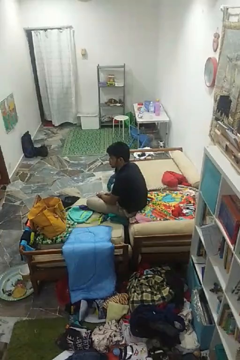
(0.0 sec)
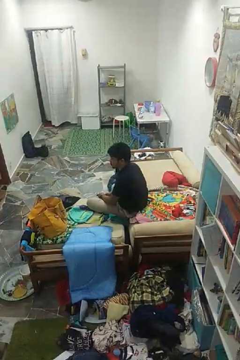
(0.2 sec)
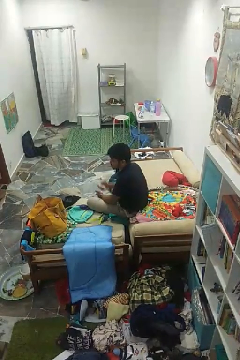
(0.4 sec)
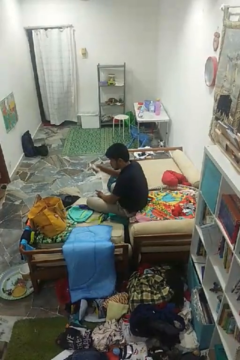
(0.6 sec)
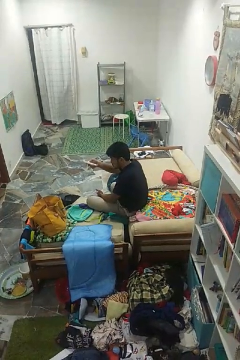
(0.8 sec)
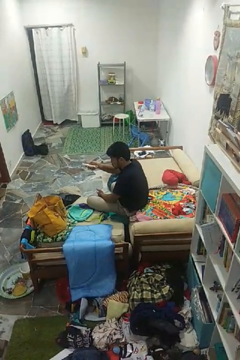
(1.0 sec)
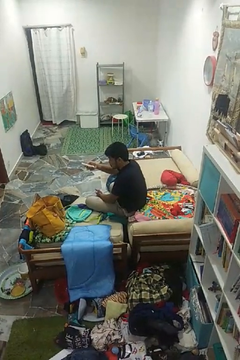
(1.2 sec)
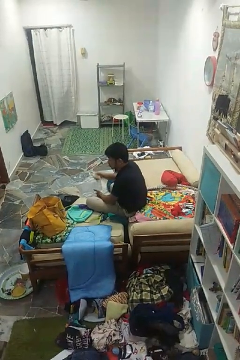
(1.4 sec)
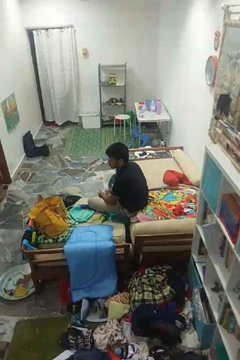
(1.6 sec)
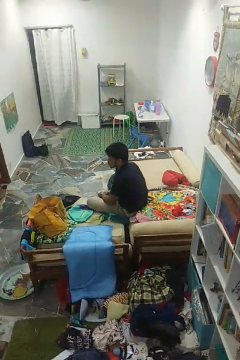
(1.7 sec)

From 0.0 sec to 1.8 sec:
person uses television remote

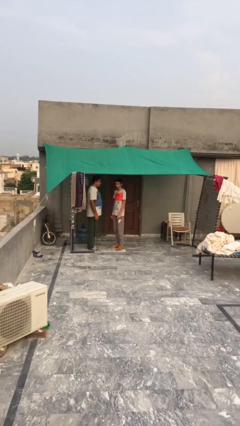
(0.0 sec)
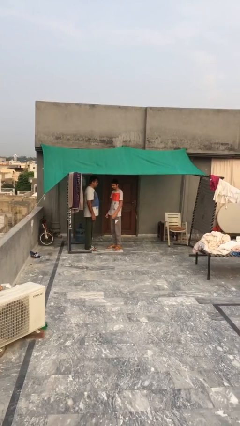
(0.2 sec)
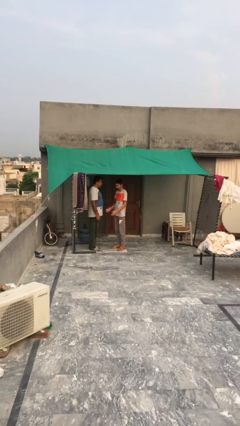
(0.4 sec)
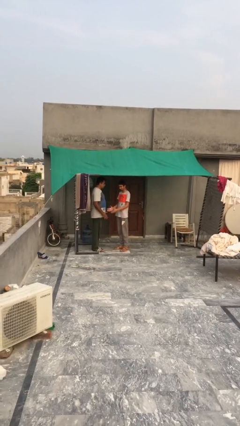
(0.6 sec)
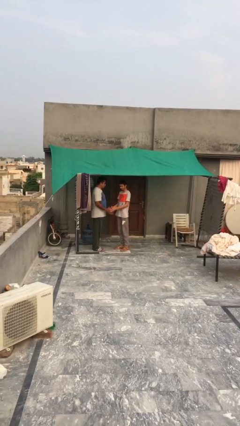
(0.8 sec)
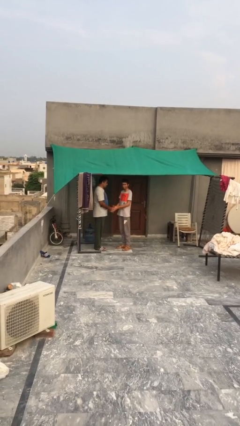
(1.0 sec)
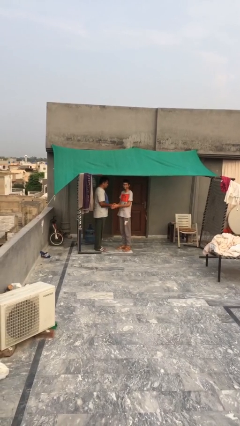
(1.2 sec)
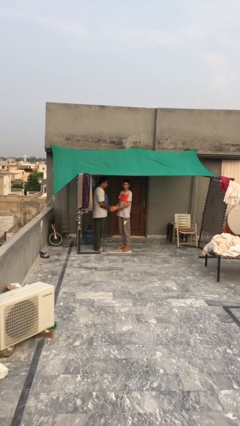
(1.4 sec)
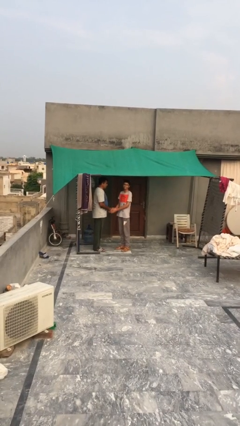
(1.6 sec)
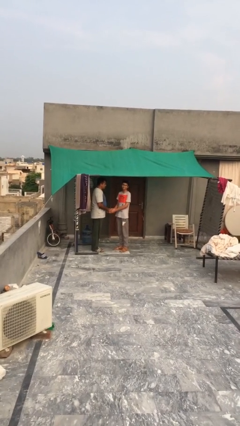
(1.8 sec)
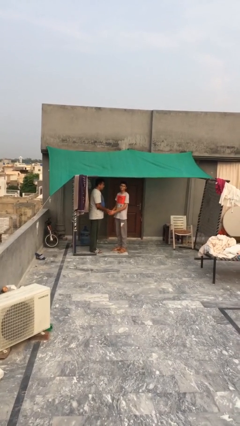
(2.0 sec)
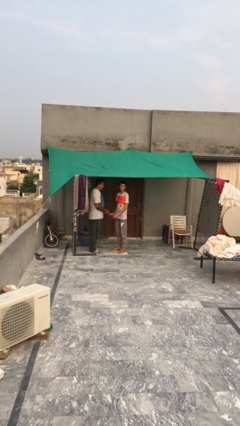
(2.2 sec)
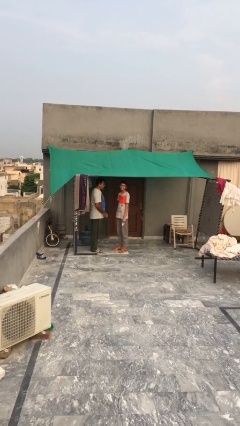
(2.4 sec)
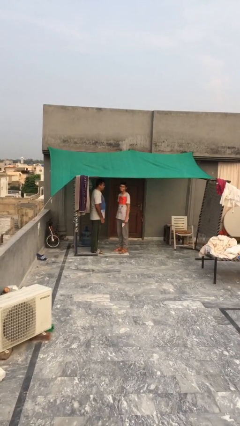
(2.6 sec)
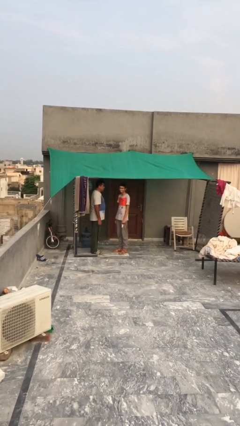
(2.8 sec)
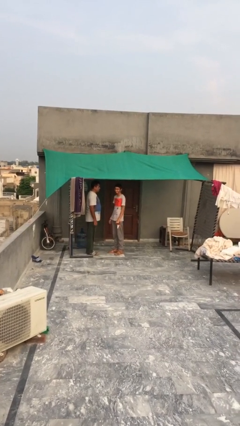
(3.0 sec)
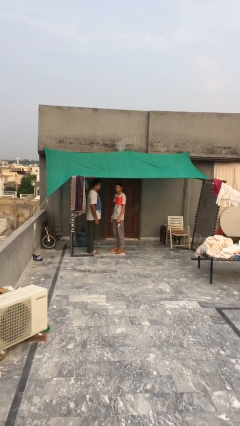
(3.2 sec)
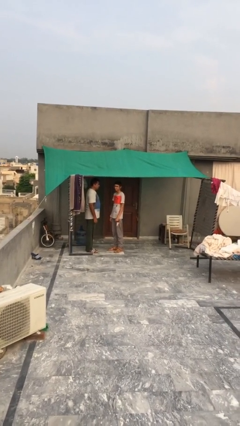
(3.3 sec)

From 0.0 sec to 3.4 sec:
person shakes hand

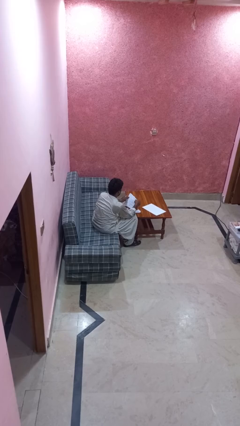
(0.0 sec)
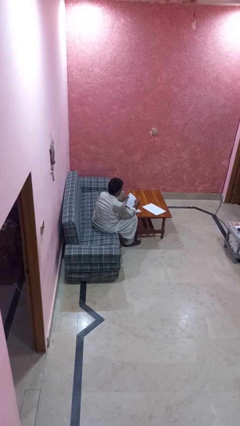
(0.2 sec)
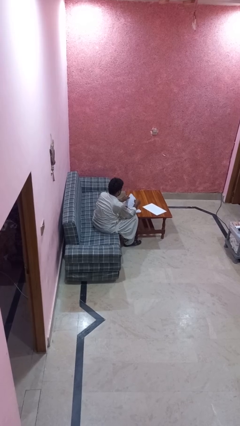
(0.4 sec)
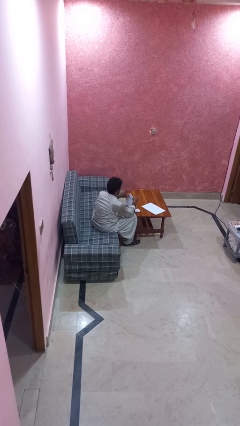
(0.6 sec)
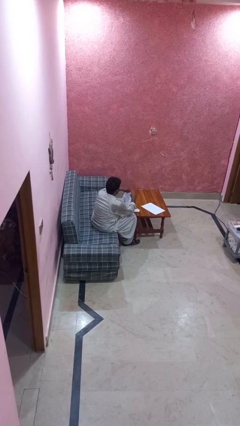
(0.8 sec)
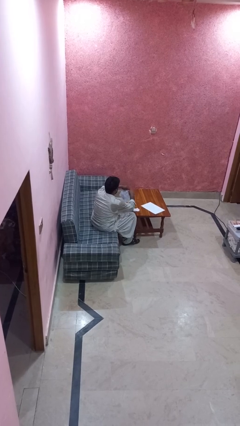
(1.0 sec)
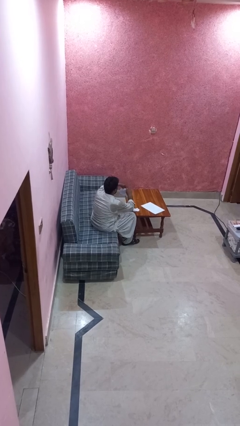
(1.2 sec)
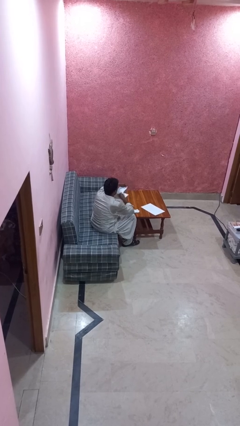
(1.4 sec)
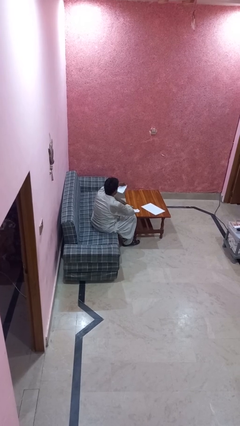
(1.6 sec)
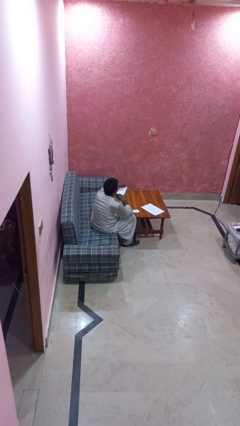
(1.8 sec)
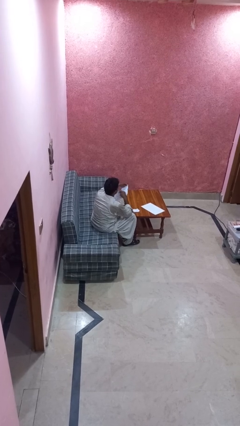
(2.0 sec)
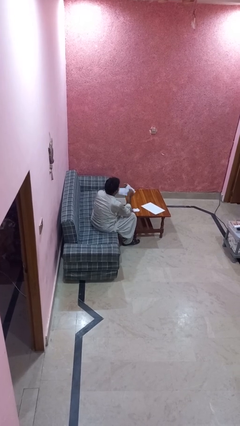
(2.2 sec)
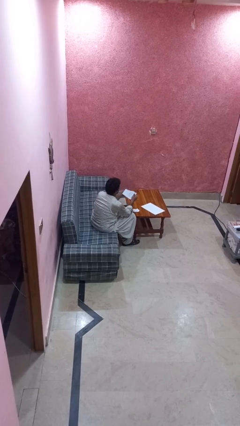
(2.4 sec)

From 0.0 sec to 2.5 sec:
person tears paper

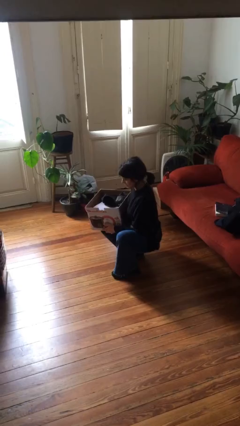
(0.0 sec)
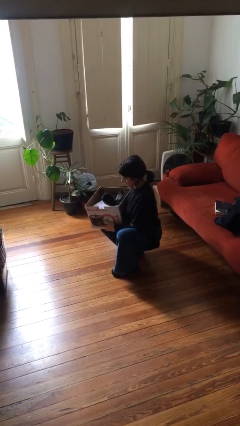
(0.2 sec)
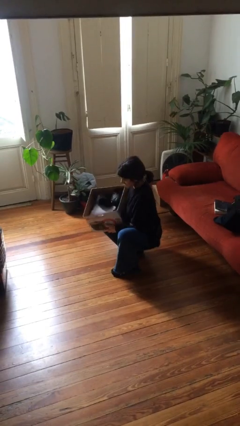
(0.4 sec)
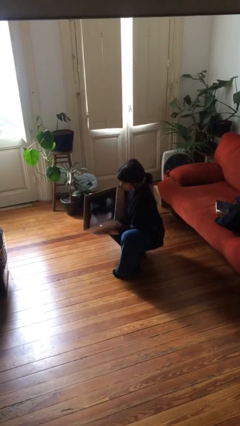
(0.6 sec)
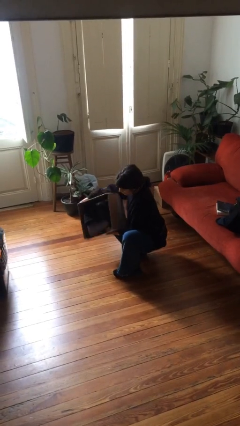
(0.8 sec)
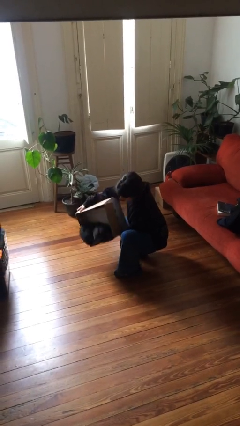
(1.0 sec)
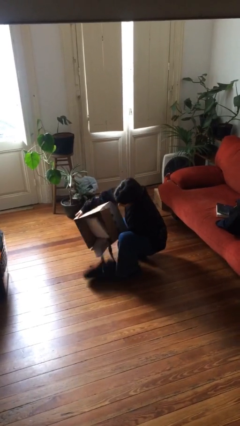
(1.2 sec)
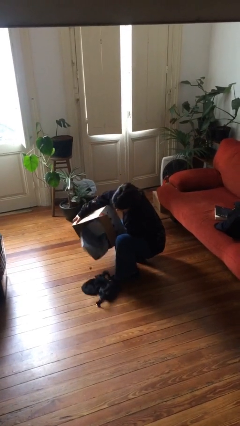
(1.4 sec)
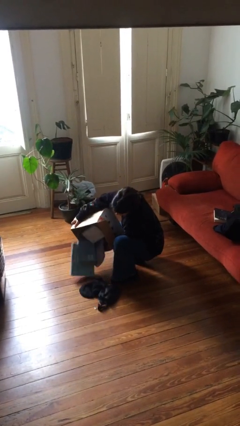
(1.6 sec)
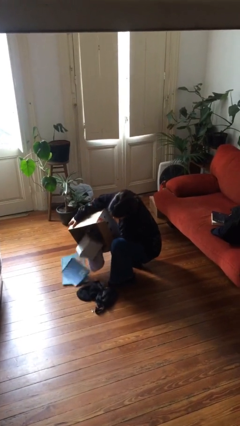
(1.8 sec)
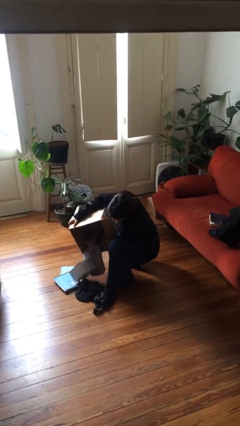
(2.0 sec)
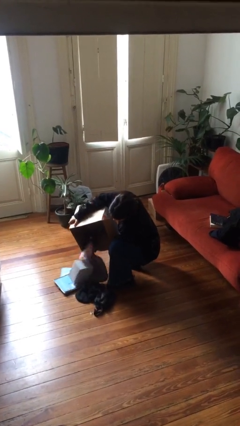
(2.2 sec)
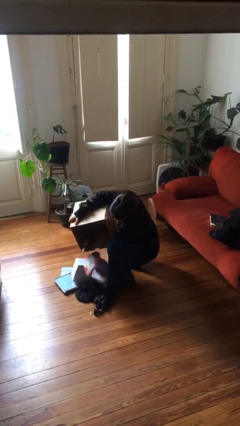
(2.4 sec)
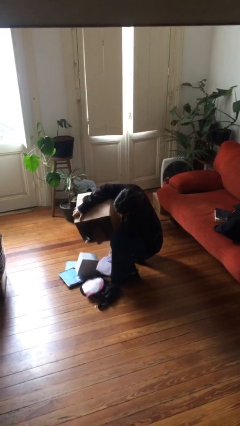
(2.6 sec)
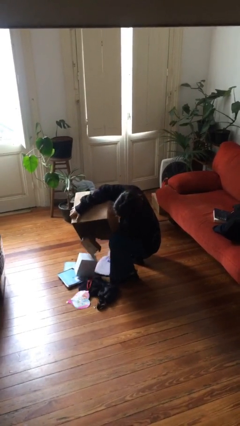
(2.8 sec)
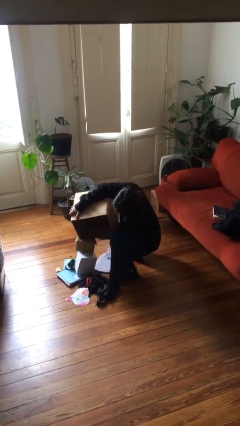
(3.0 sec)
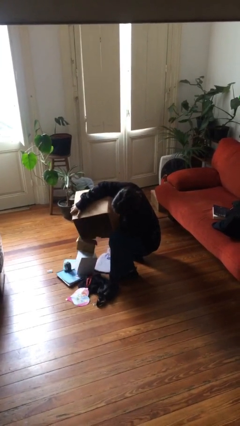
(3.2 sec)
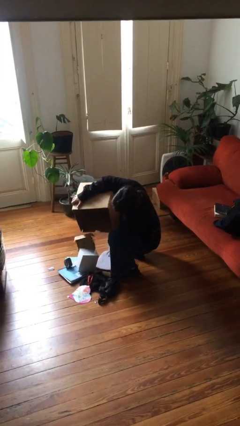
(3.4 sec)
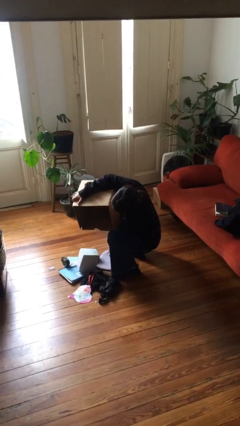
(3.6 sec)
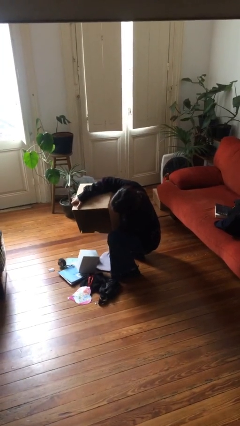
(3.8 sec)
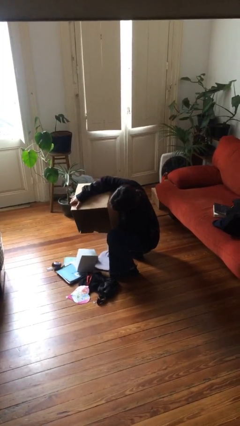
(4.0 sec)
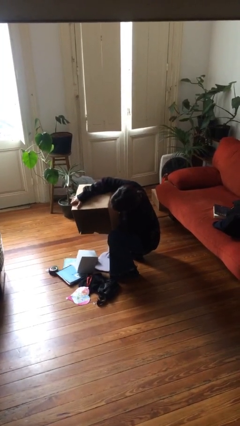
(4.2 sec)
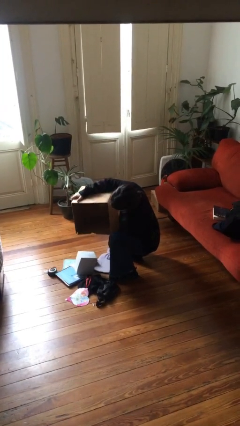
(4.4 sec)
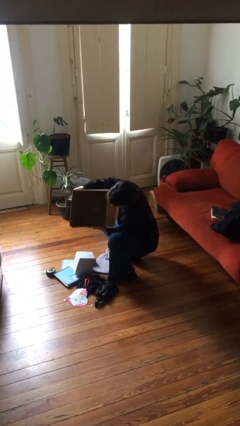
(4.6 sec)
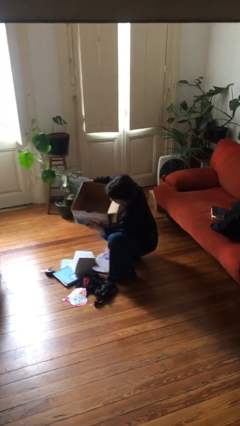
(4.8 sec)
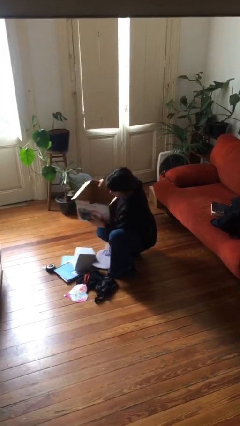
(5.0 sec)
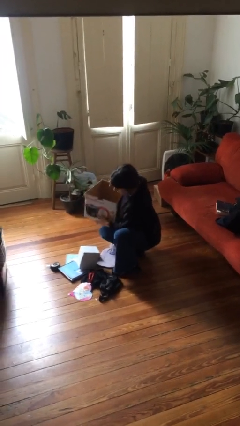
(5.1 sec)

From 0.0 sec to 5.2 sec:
person unloads box onto floor

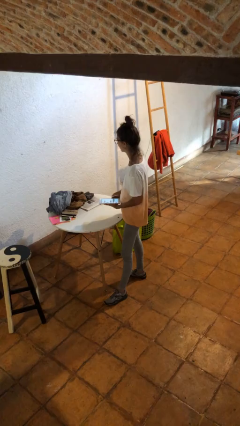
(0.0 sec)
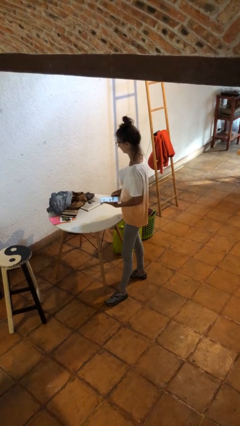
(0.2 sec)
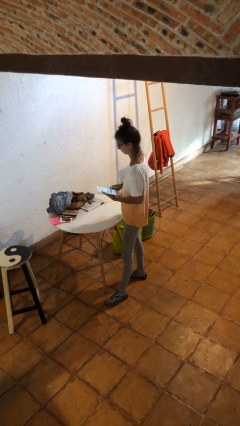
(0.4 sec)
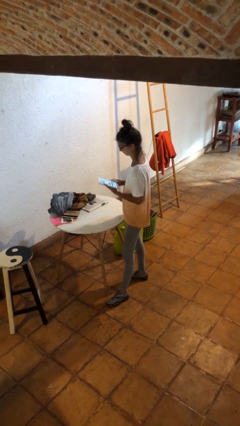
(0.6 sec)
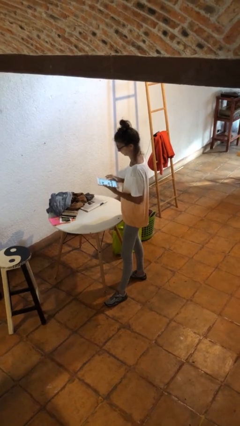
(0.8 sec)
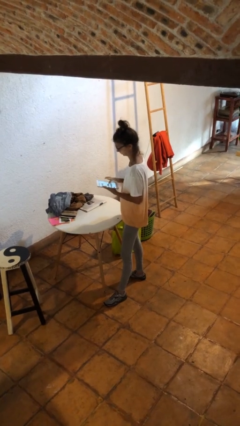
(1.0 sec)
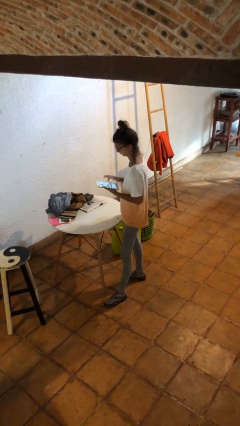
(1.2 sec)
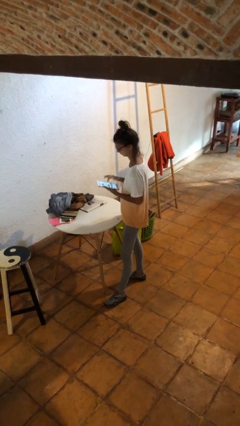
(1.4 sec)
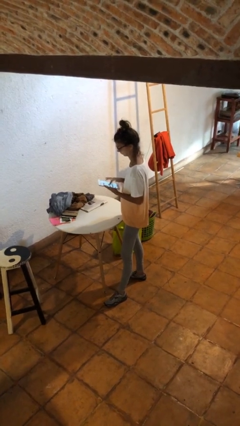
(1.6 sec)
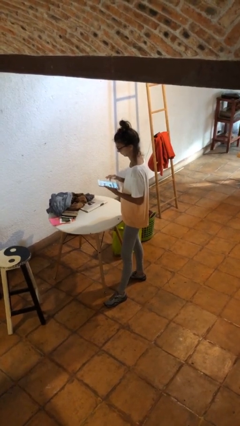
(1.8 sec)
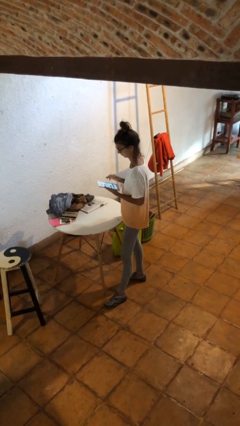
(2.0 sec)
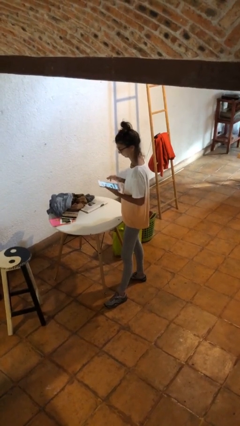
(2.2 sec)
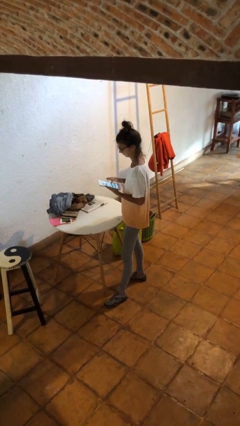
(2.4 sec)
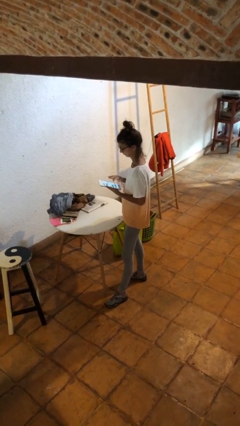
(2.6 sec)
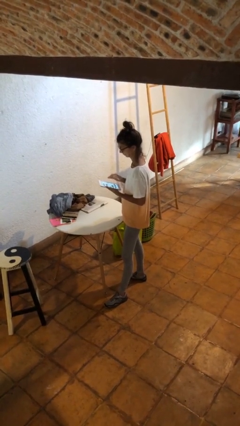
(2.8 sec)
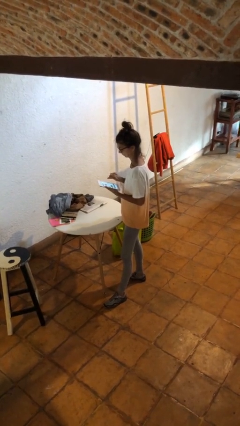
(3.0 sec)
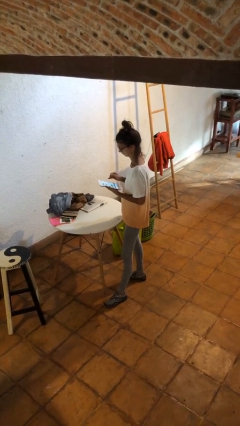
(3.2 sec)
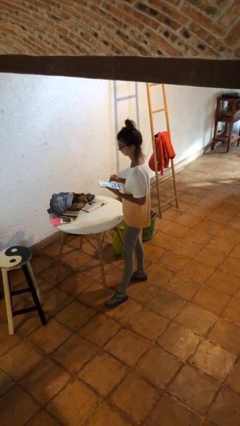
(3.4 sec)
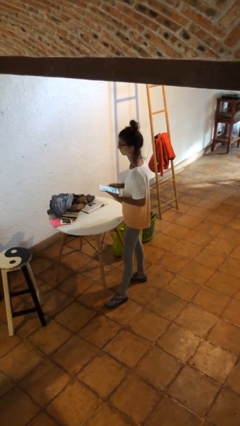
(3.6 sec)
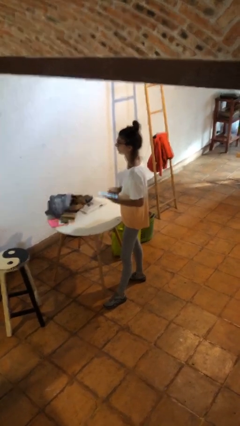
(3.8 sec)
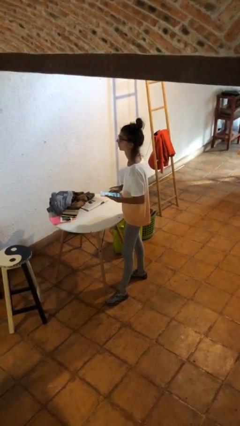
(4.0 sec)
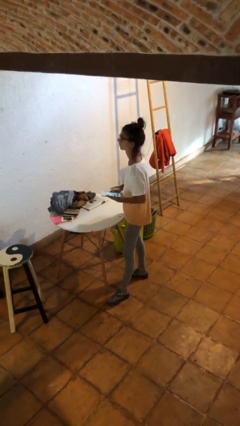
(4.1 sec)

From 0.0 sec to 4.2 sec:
person interacts with tablet

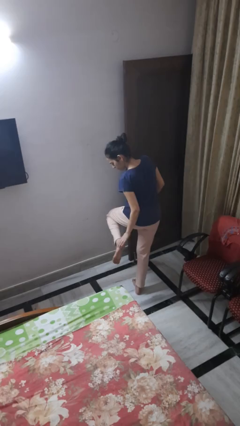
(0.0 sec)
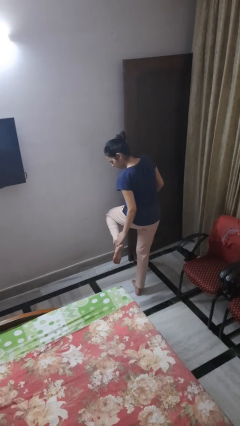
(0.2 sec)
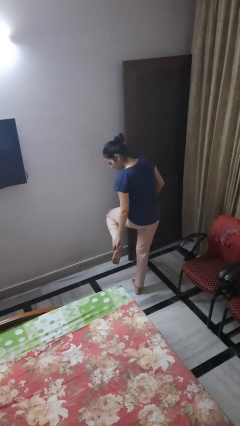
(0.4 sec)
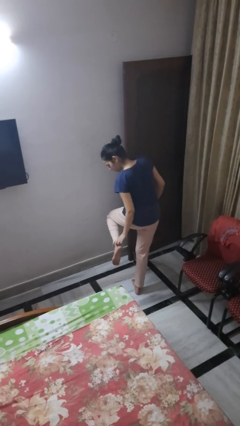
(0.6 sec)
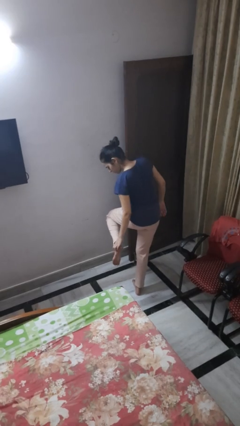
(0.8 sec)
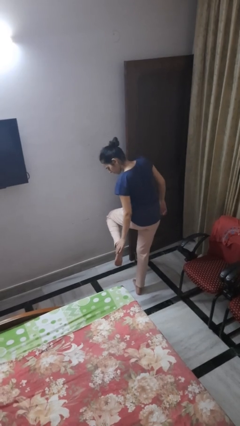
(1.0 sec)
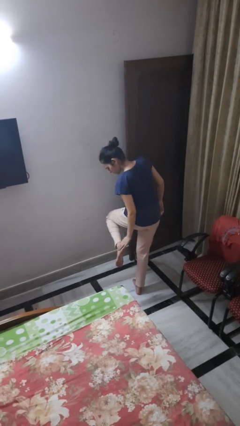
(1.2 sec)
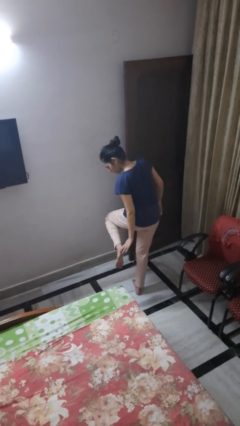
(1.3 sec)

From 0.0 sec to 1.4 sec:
person swats bug
